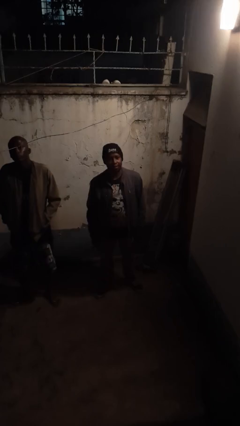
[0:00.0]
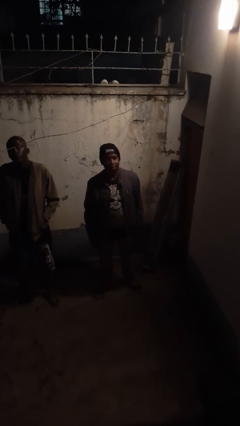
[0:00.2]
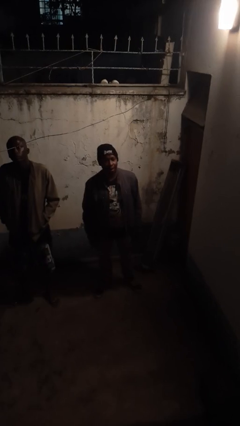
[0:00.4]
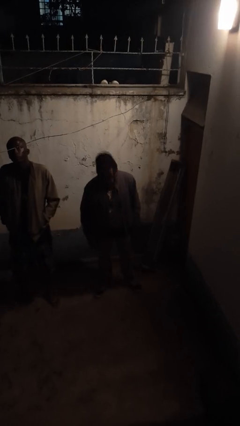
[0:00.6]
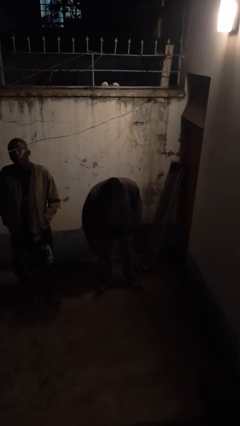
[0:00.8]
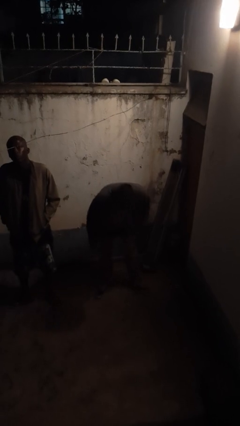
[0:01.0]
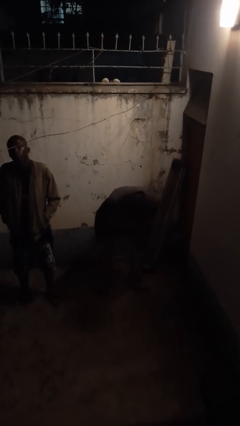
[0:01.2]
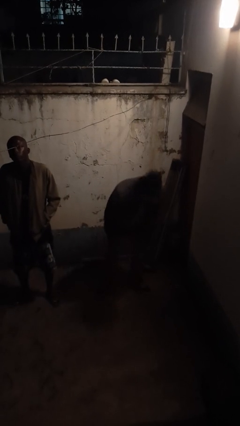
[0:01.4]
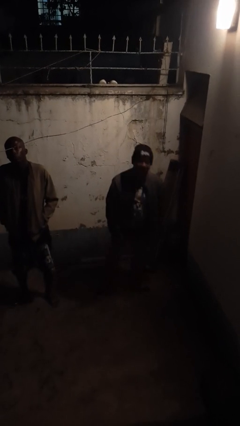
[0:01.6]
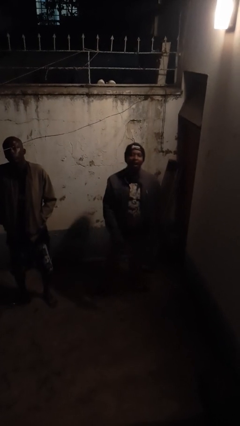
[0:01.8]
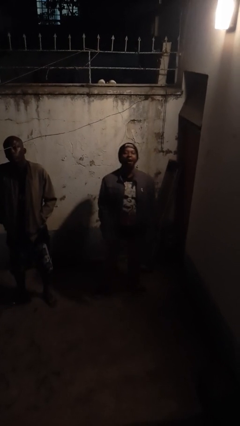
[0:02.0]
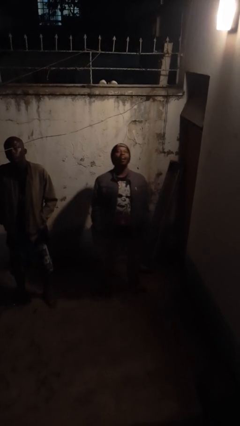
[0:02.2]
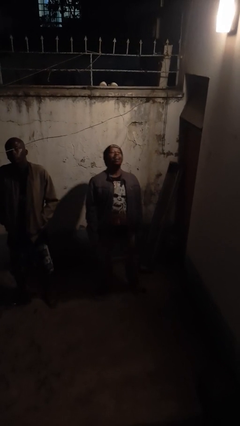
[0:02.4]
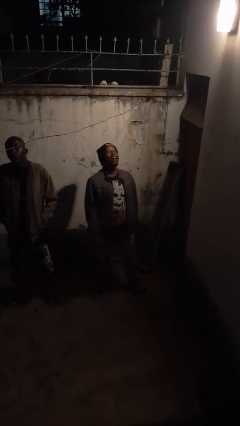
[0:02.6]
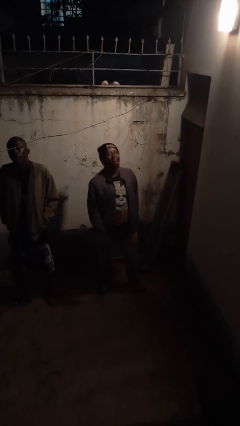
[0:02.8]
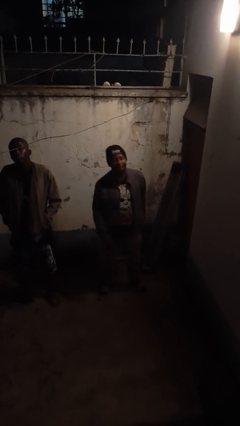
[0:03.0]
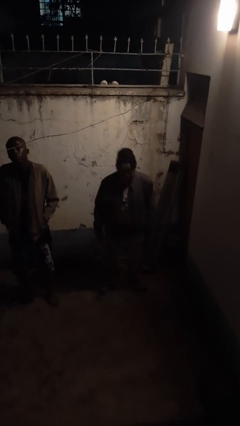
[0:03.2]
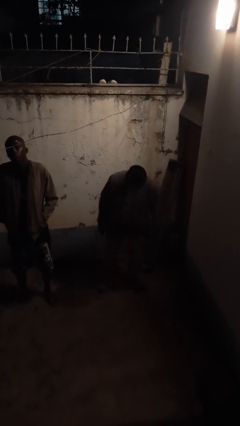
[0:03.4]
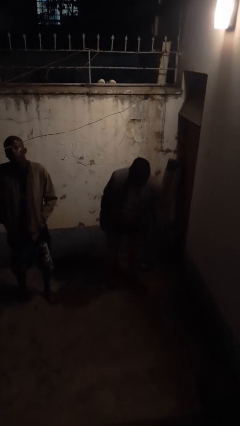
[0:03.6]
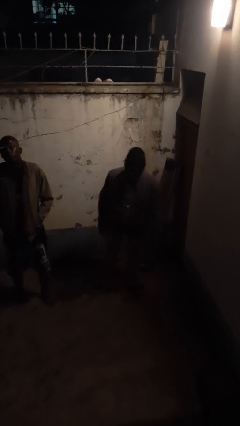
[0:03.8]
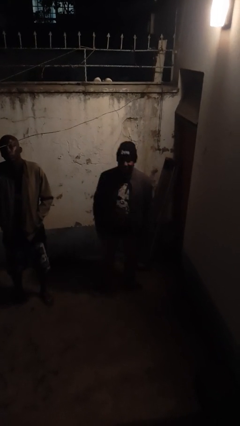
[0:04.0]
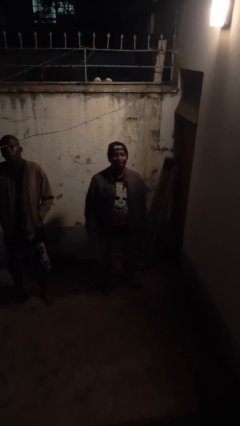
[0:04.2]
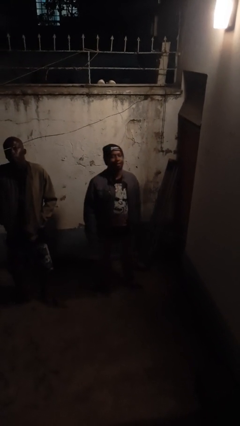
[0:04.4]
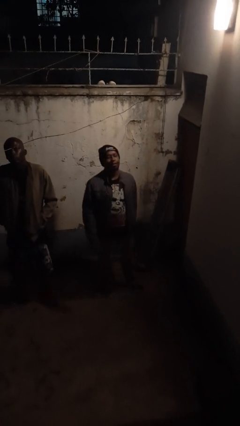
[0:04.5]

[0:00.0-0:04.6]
person laughs with person

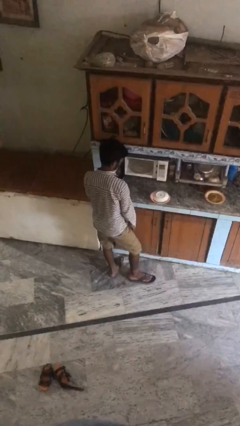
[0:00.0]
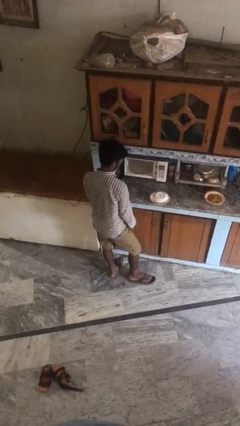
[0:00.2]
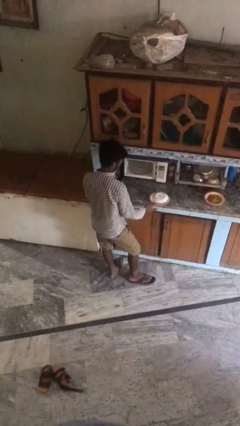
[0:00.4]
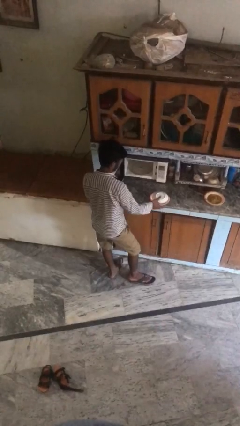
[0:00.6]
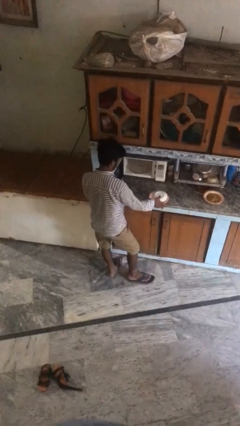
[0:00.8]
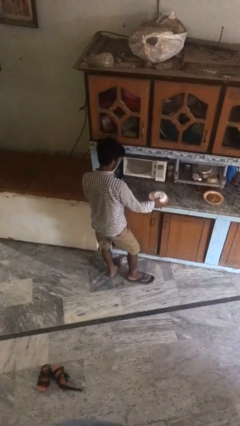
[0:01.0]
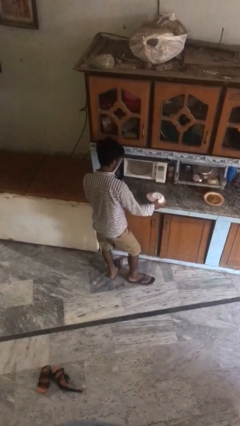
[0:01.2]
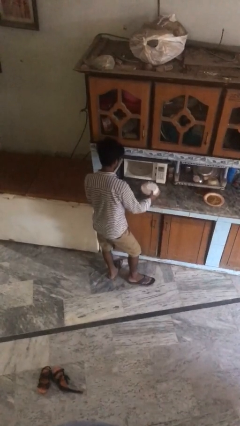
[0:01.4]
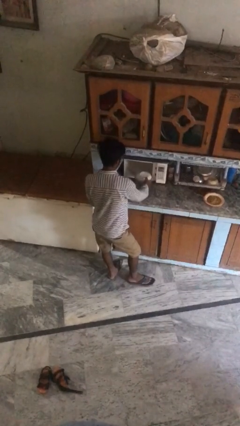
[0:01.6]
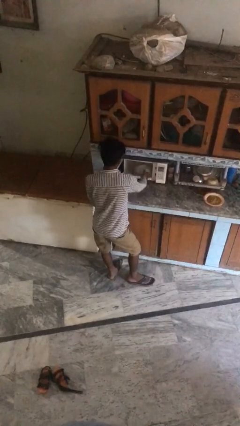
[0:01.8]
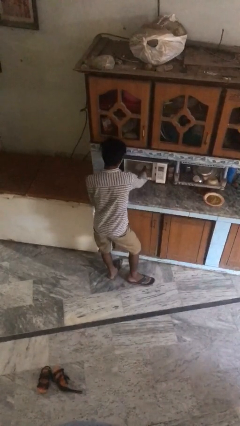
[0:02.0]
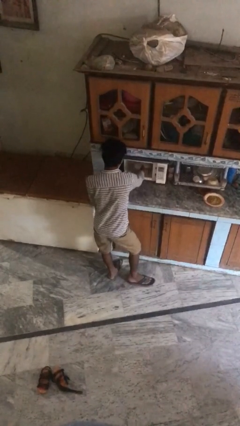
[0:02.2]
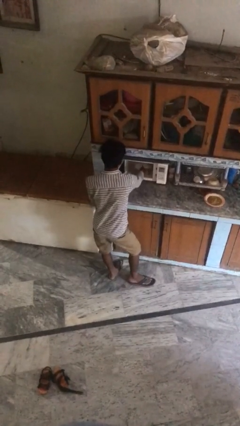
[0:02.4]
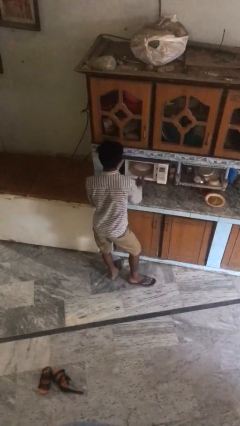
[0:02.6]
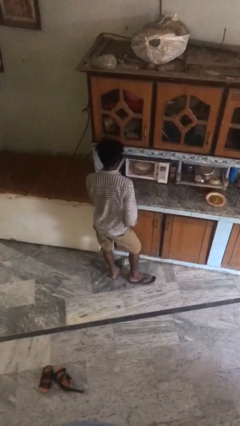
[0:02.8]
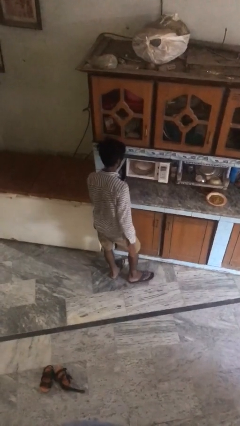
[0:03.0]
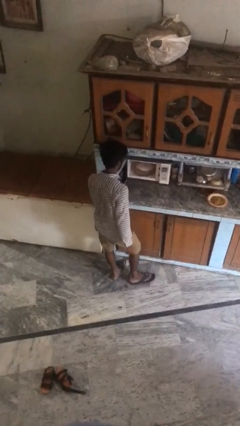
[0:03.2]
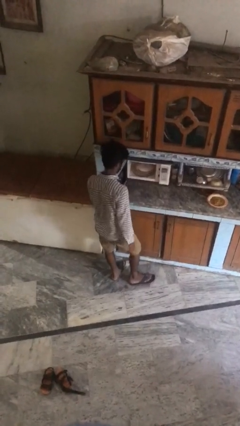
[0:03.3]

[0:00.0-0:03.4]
person puts object into oven

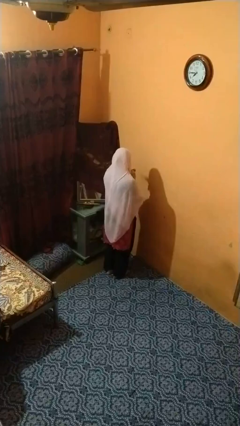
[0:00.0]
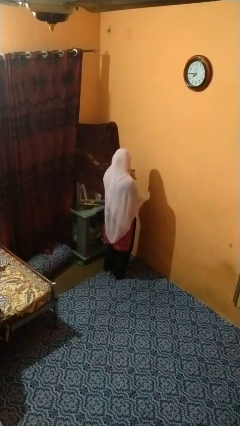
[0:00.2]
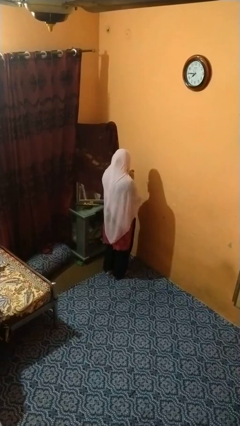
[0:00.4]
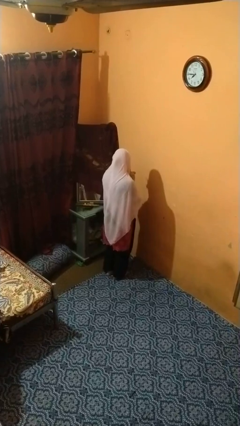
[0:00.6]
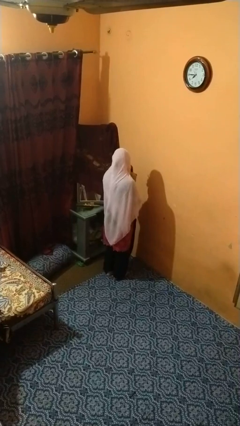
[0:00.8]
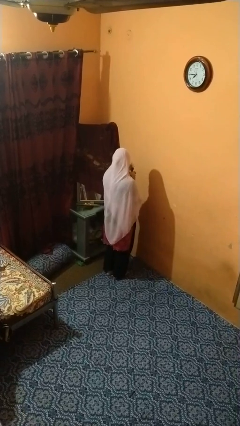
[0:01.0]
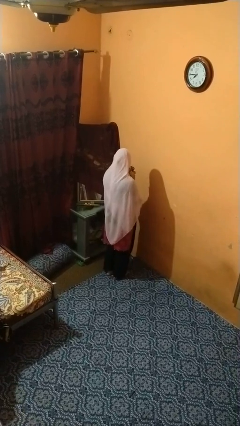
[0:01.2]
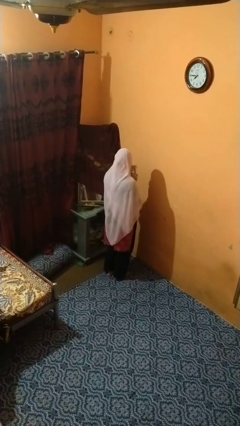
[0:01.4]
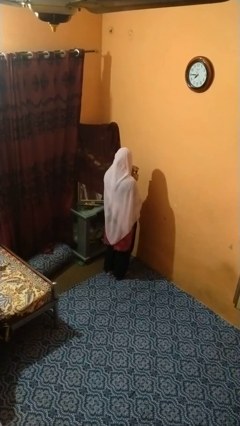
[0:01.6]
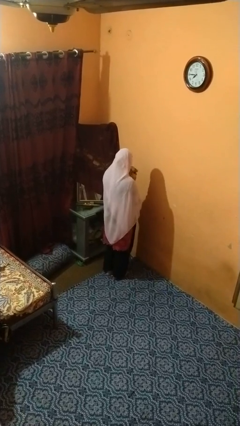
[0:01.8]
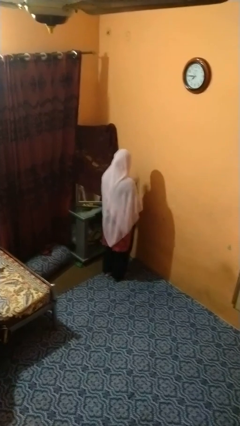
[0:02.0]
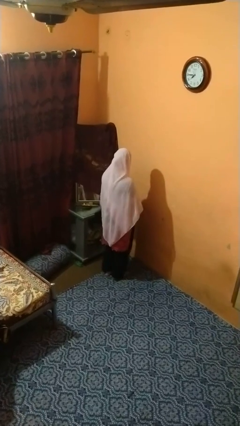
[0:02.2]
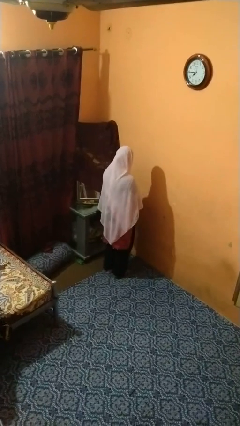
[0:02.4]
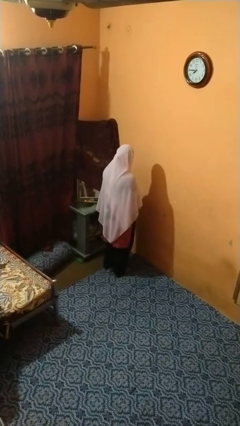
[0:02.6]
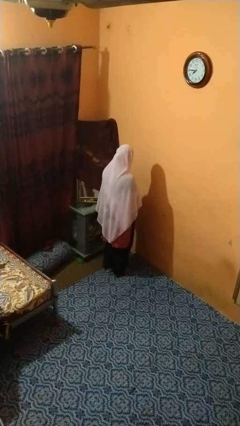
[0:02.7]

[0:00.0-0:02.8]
person hugs stuffed animal

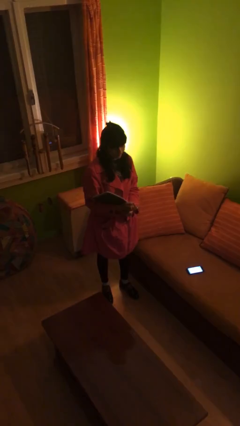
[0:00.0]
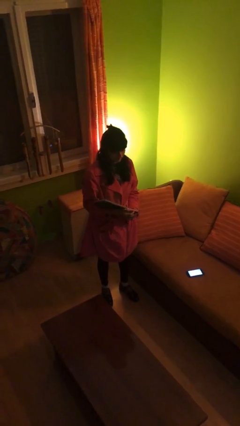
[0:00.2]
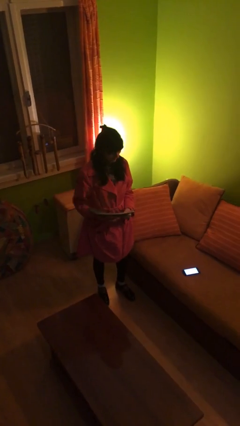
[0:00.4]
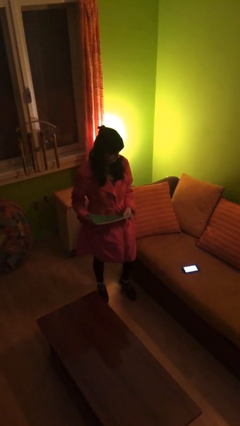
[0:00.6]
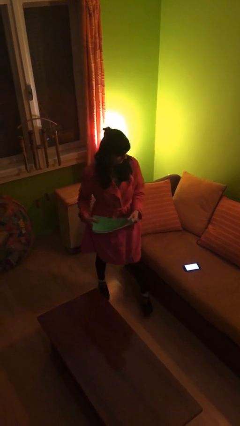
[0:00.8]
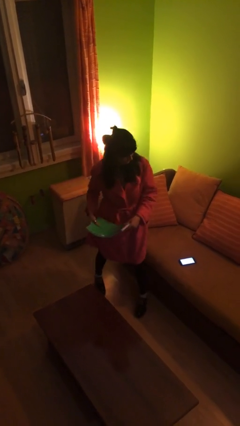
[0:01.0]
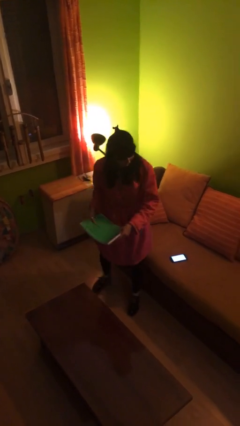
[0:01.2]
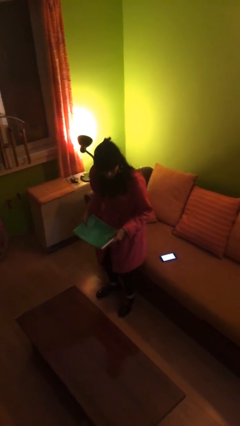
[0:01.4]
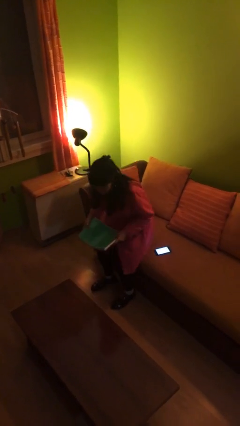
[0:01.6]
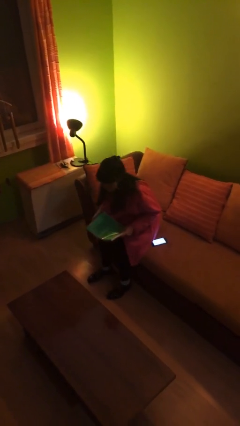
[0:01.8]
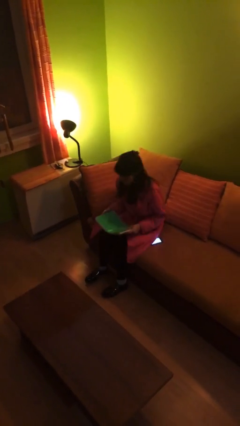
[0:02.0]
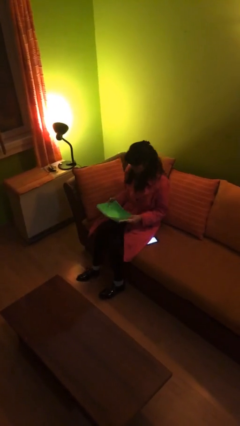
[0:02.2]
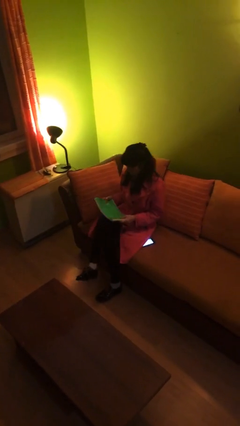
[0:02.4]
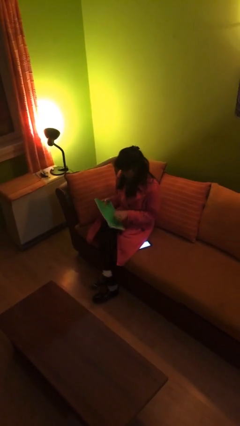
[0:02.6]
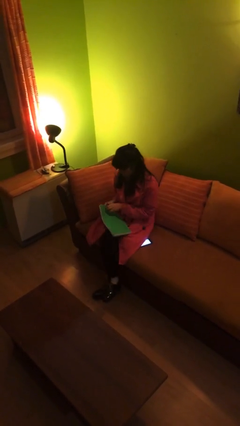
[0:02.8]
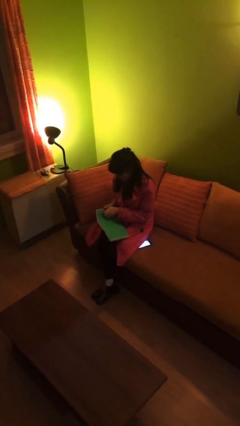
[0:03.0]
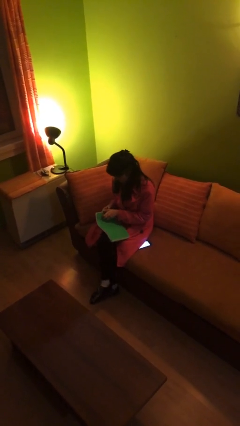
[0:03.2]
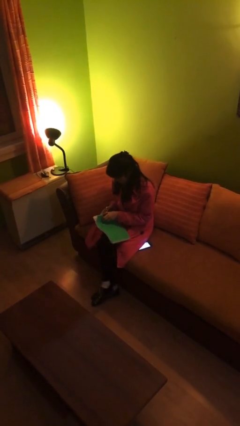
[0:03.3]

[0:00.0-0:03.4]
person sits down

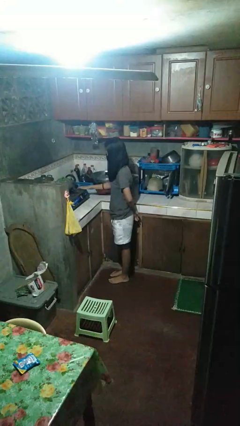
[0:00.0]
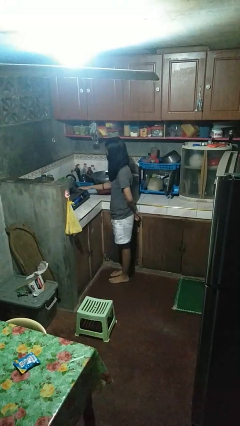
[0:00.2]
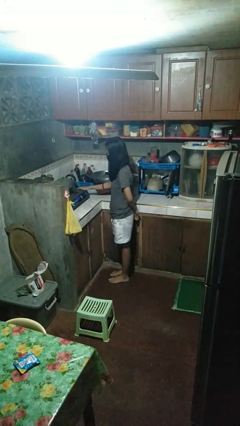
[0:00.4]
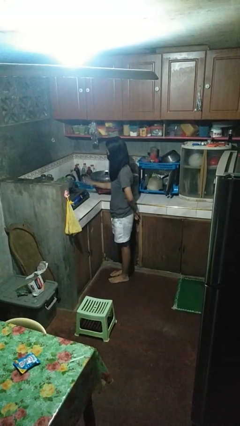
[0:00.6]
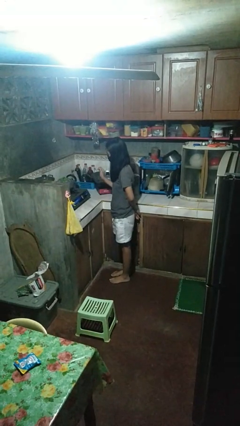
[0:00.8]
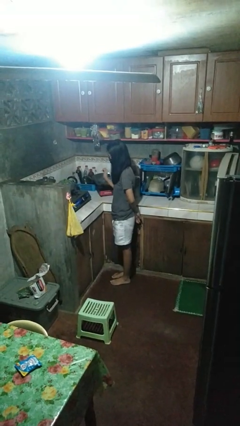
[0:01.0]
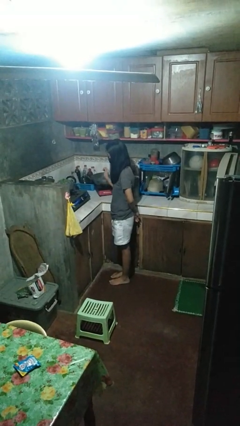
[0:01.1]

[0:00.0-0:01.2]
person burns hand

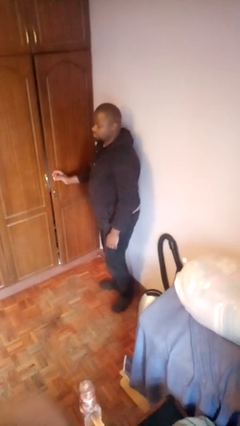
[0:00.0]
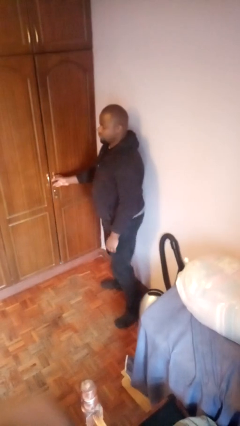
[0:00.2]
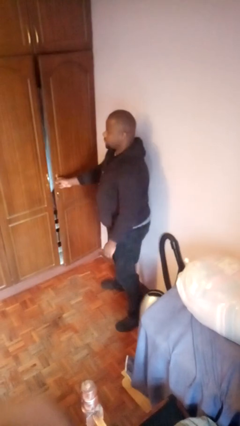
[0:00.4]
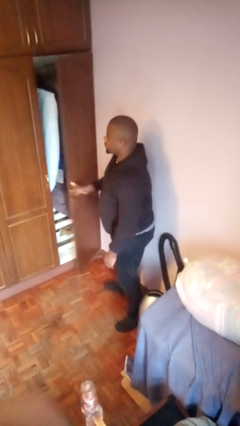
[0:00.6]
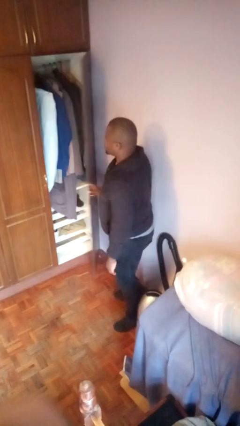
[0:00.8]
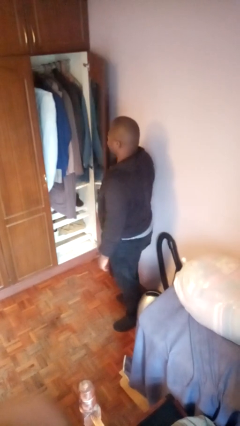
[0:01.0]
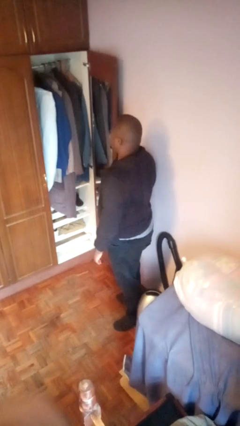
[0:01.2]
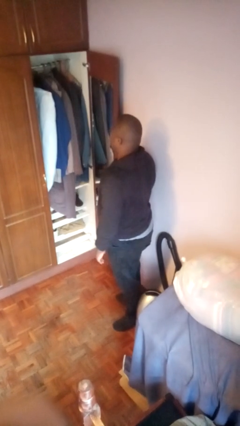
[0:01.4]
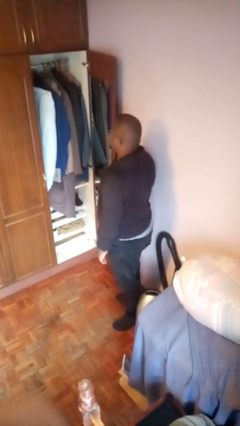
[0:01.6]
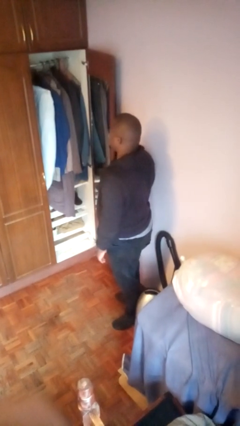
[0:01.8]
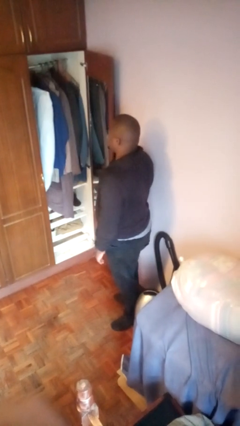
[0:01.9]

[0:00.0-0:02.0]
person opens closet door

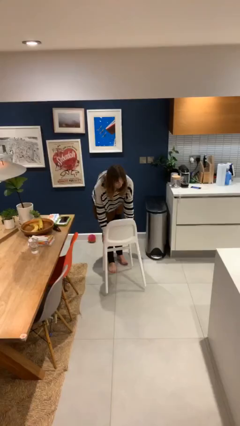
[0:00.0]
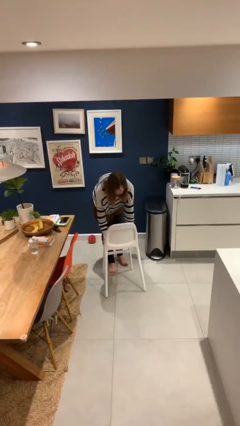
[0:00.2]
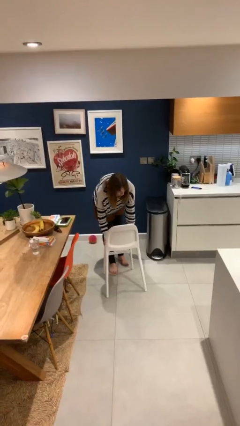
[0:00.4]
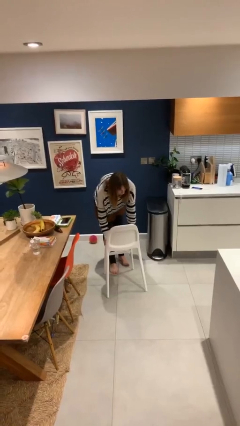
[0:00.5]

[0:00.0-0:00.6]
person puts down object on floor
